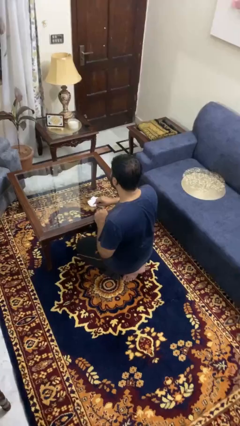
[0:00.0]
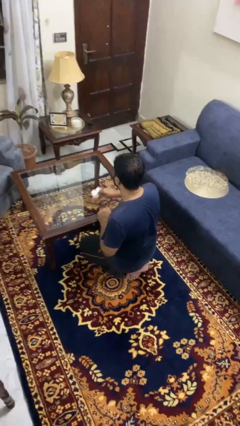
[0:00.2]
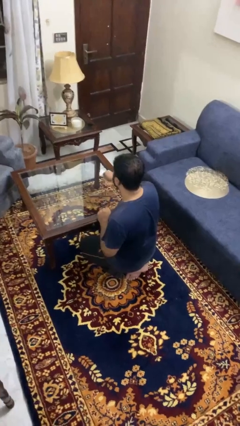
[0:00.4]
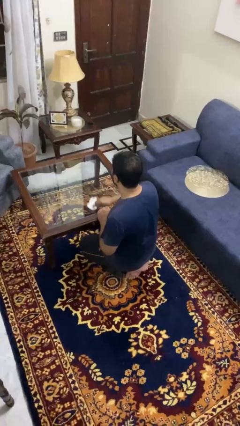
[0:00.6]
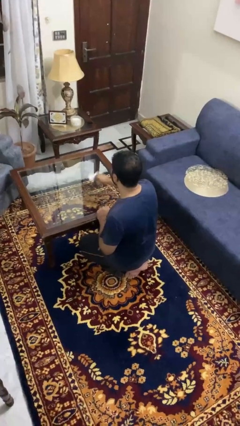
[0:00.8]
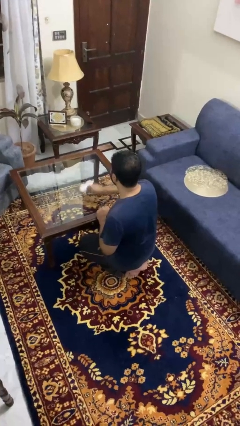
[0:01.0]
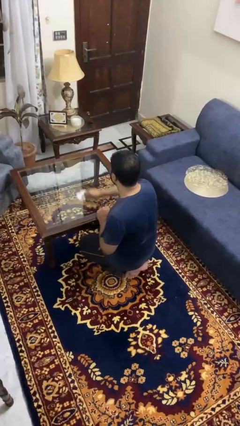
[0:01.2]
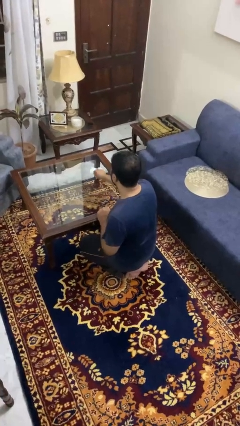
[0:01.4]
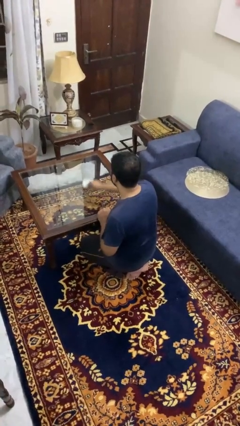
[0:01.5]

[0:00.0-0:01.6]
person cleans table with rag

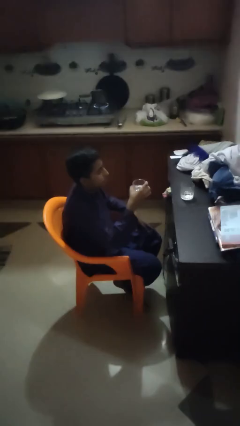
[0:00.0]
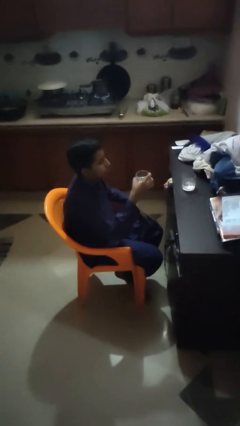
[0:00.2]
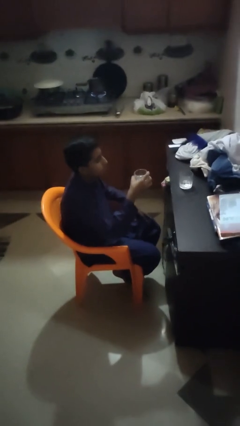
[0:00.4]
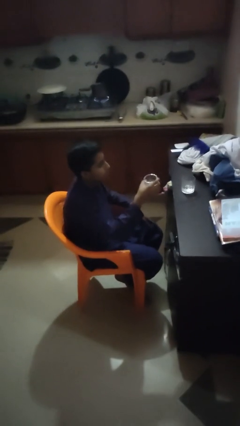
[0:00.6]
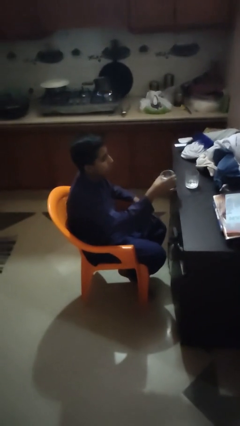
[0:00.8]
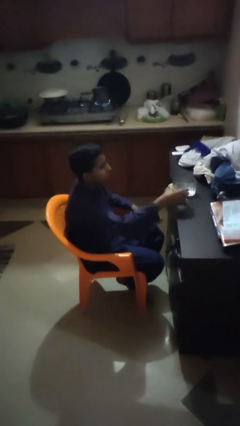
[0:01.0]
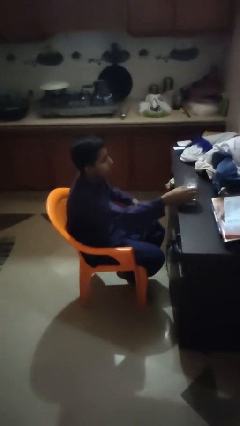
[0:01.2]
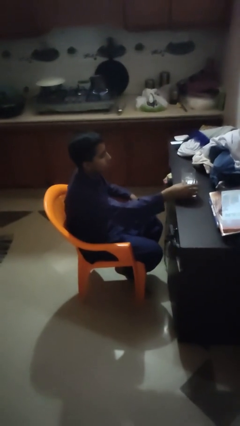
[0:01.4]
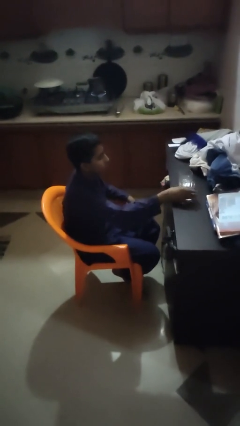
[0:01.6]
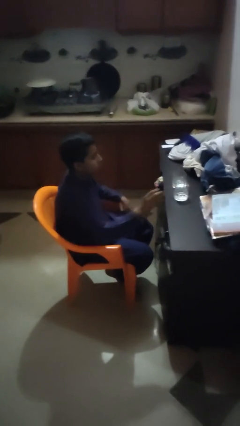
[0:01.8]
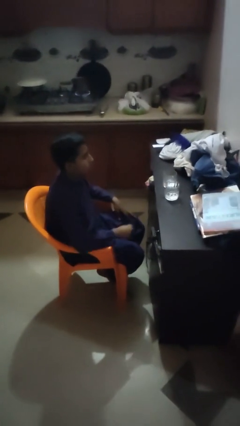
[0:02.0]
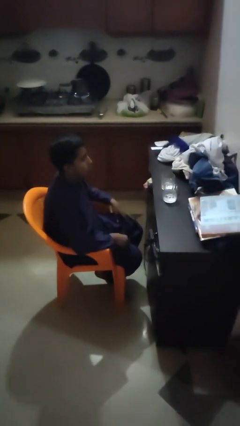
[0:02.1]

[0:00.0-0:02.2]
person puts down object on table

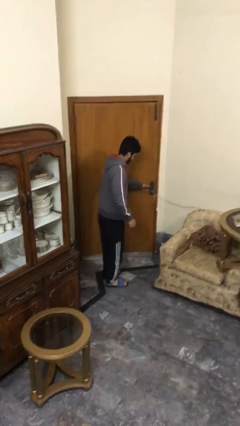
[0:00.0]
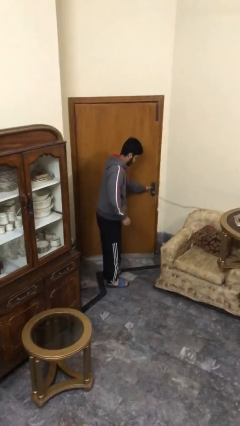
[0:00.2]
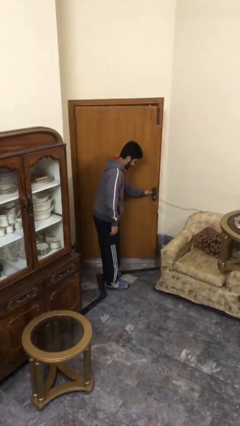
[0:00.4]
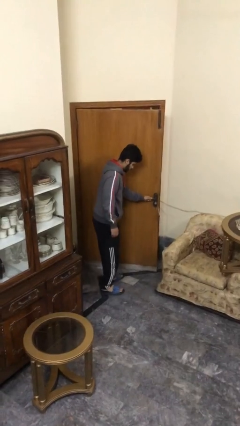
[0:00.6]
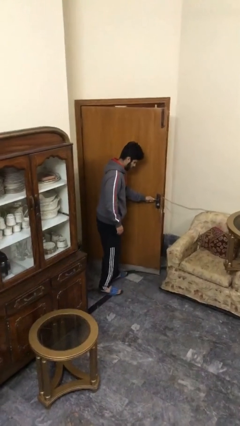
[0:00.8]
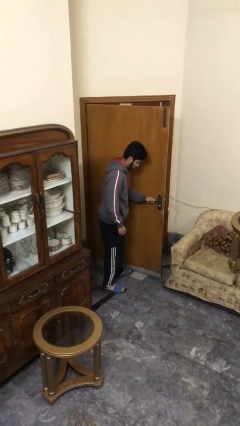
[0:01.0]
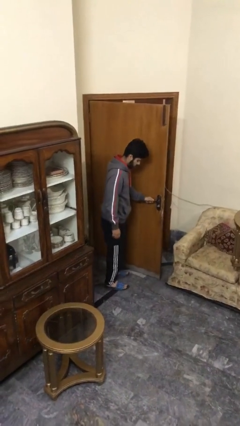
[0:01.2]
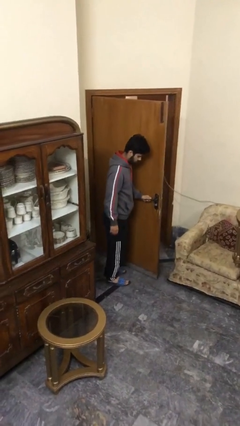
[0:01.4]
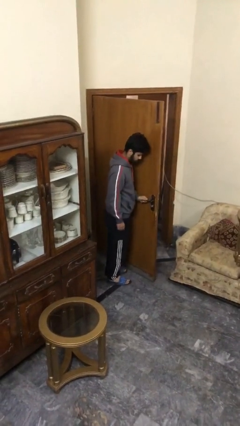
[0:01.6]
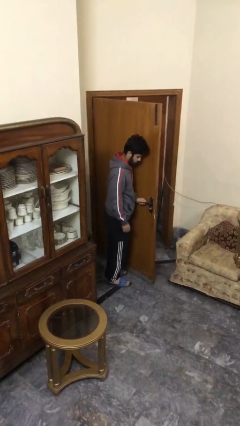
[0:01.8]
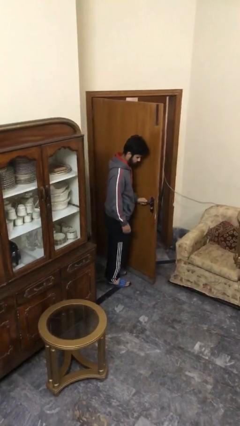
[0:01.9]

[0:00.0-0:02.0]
person opens facility door

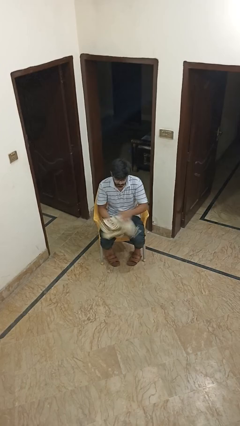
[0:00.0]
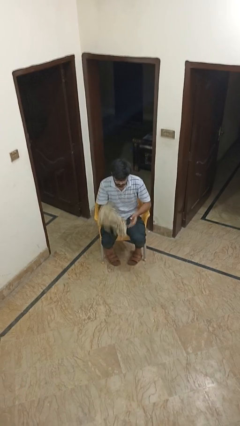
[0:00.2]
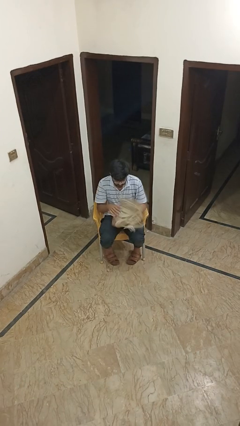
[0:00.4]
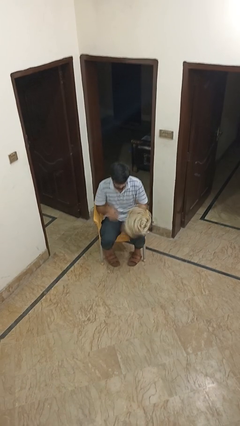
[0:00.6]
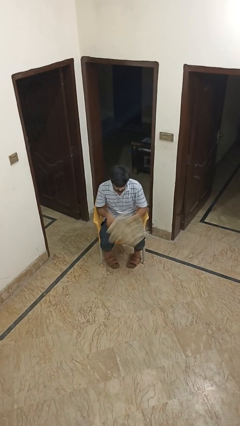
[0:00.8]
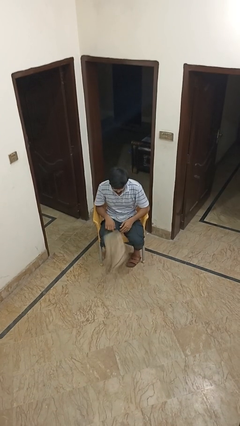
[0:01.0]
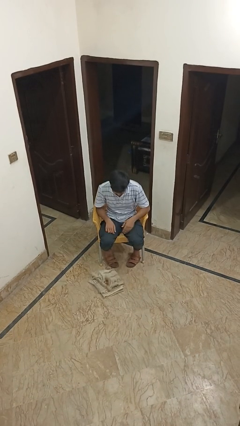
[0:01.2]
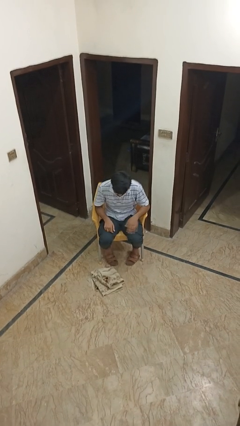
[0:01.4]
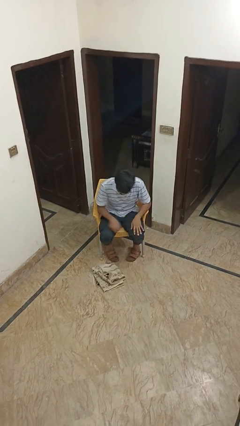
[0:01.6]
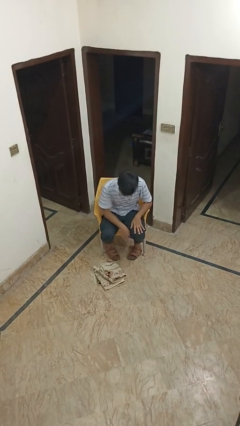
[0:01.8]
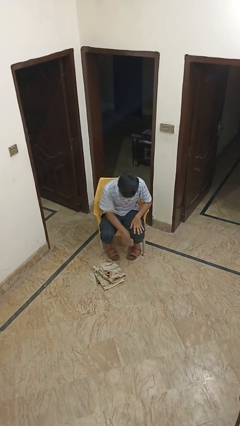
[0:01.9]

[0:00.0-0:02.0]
person drops object

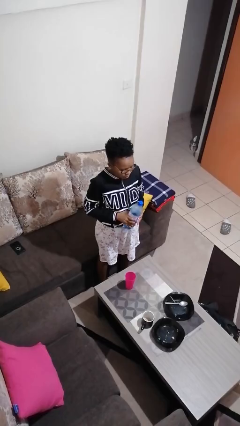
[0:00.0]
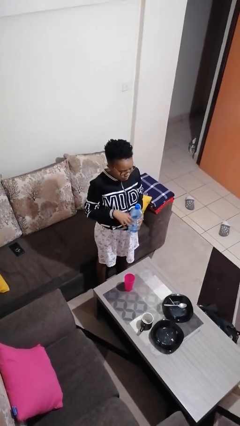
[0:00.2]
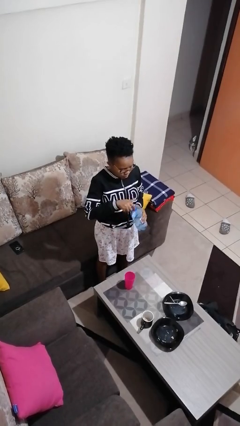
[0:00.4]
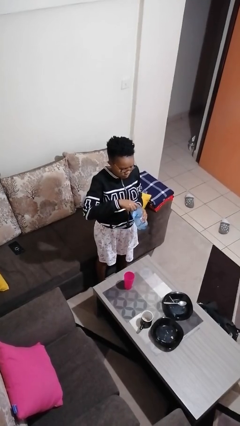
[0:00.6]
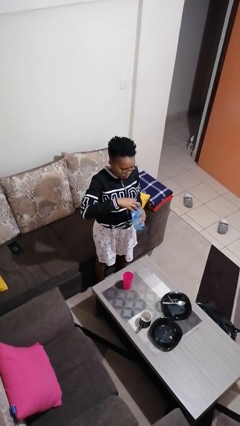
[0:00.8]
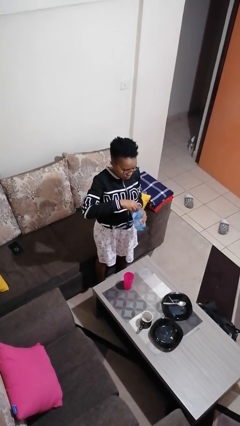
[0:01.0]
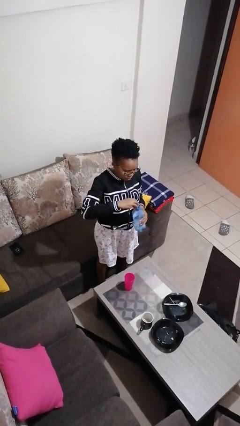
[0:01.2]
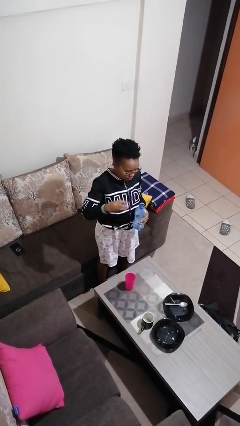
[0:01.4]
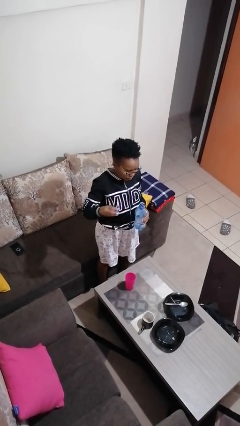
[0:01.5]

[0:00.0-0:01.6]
person unscrews lid from bottle

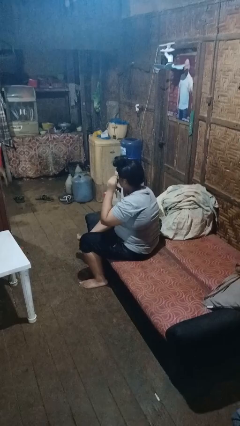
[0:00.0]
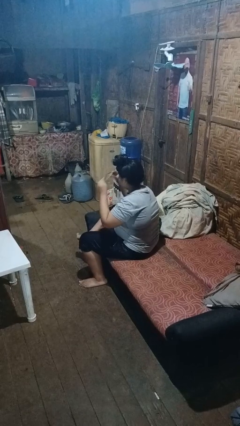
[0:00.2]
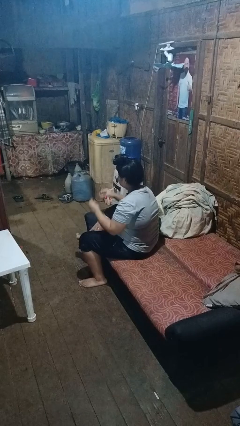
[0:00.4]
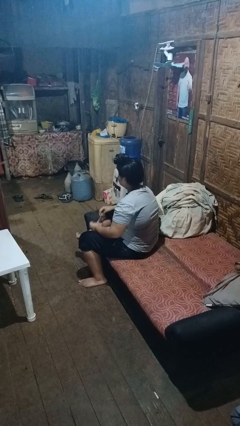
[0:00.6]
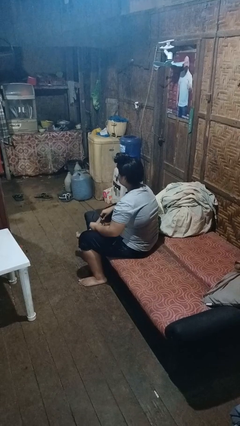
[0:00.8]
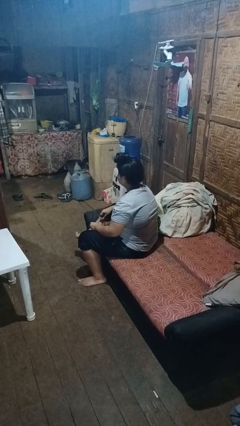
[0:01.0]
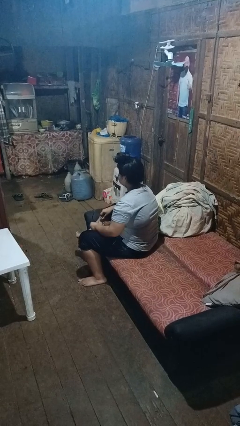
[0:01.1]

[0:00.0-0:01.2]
person takes off glasses

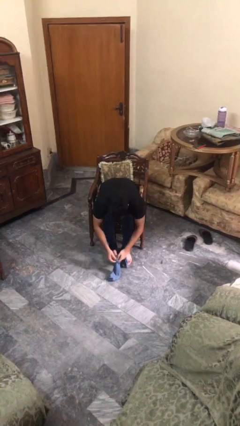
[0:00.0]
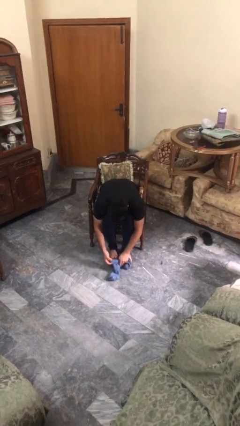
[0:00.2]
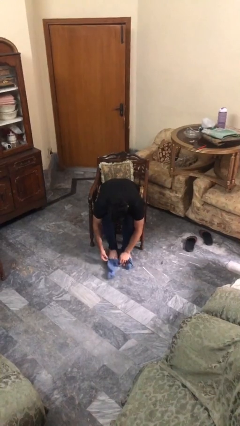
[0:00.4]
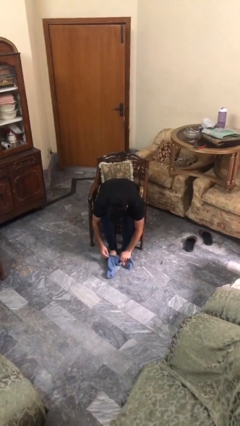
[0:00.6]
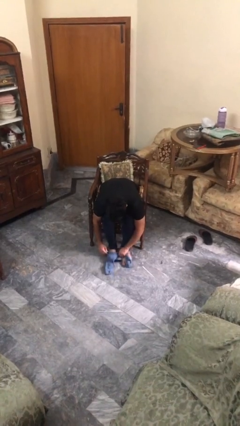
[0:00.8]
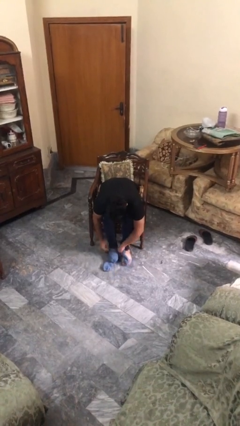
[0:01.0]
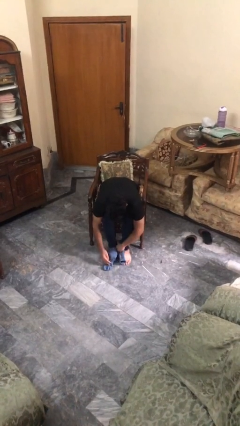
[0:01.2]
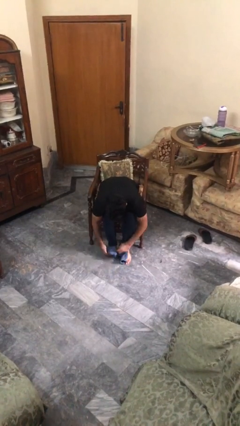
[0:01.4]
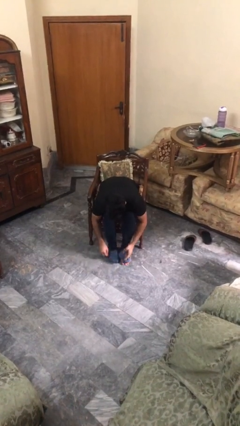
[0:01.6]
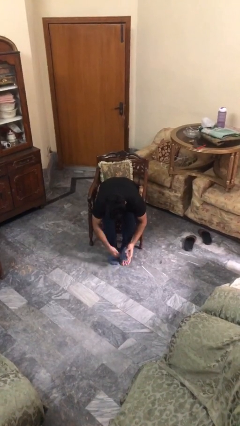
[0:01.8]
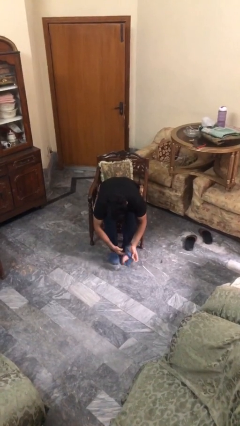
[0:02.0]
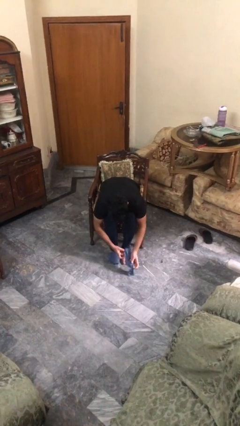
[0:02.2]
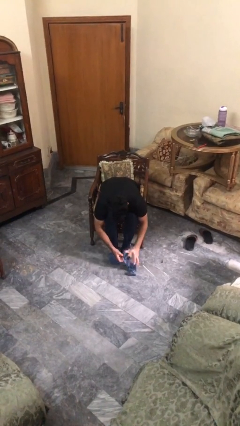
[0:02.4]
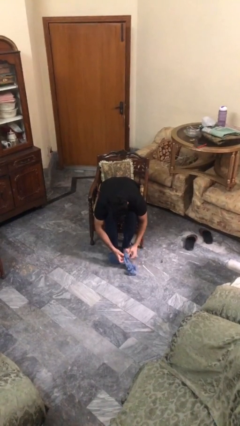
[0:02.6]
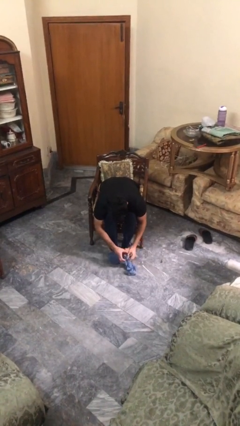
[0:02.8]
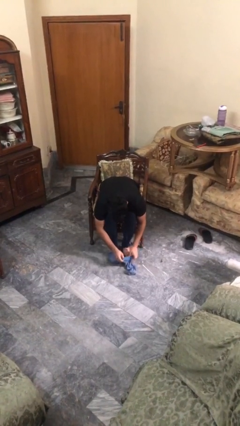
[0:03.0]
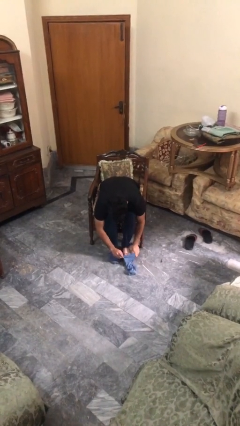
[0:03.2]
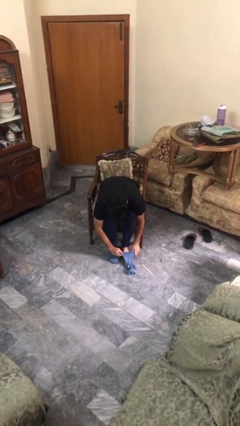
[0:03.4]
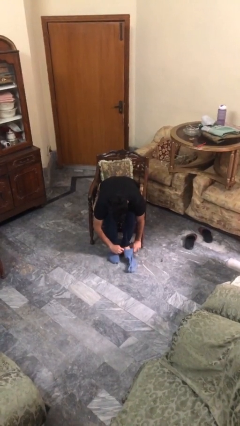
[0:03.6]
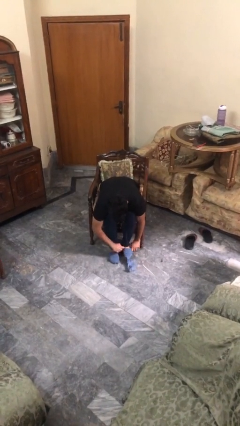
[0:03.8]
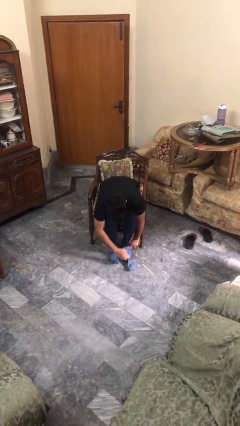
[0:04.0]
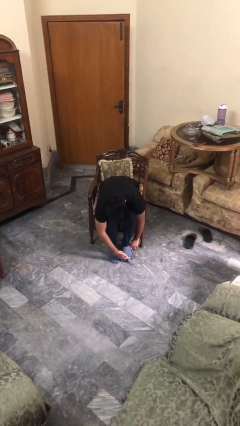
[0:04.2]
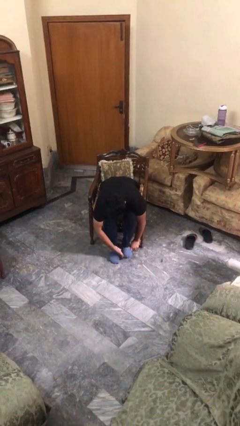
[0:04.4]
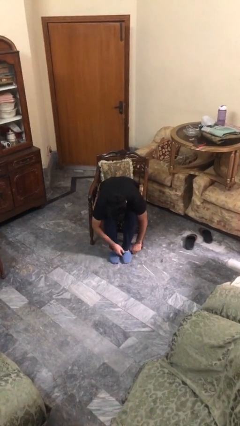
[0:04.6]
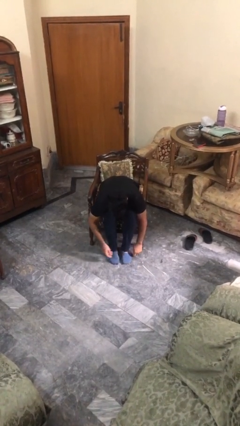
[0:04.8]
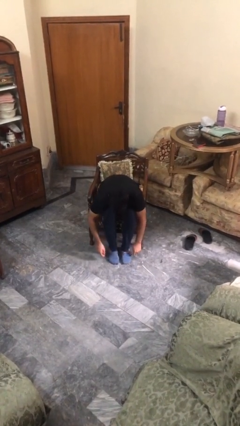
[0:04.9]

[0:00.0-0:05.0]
person puts on socks

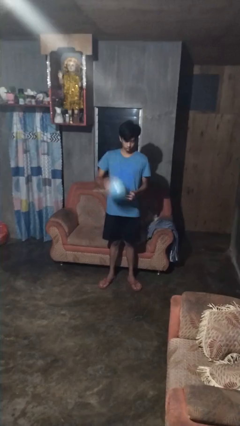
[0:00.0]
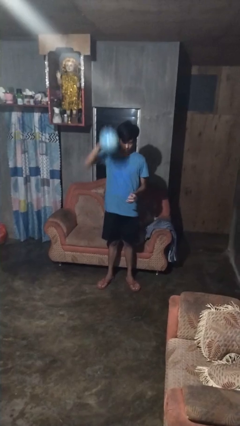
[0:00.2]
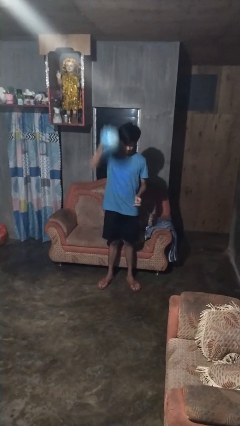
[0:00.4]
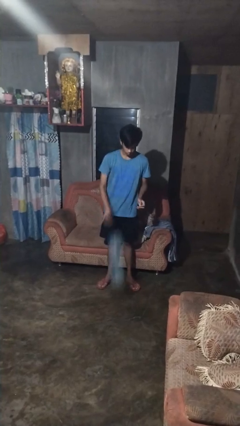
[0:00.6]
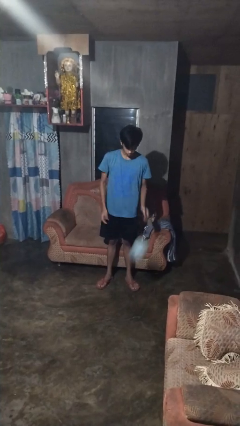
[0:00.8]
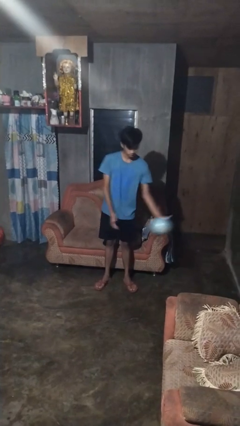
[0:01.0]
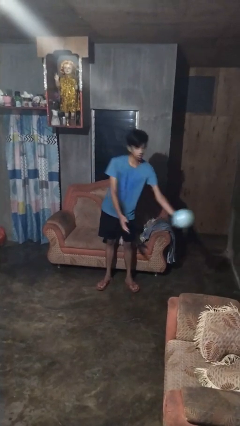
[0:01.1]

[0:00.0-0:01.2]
person bounces ball on floor

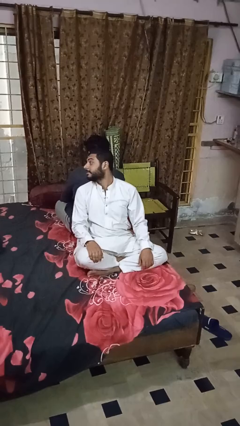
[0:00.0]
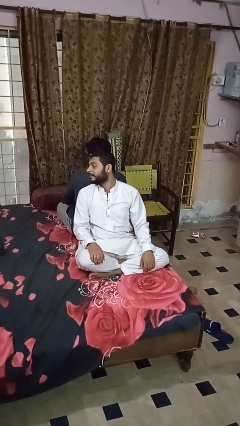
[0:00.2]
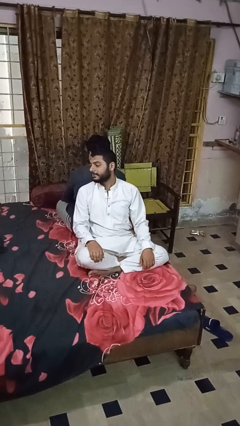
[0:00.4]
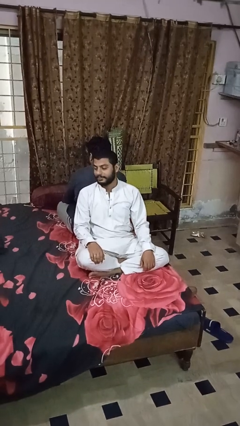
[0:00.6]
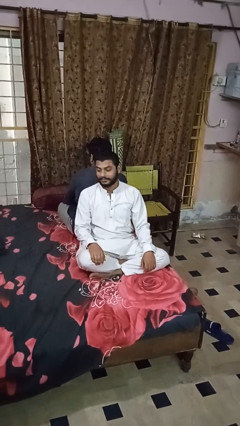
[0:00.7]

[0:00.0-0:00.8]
person looks over shoulder
